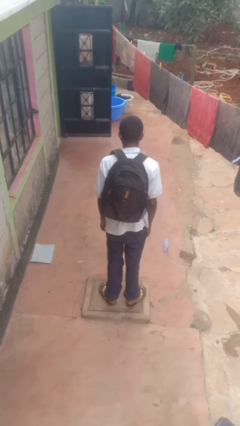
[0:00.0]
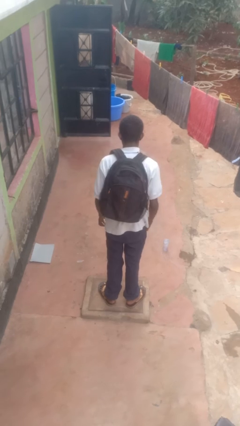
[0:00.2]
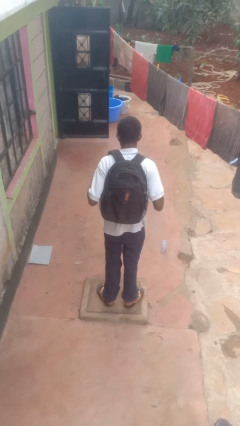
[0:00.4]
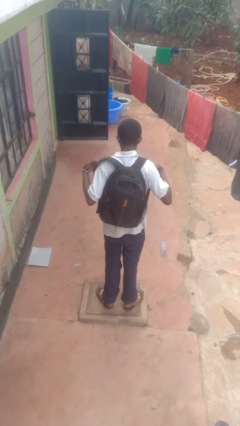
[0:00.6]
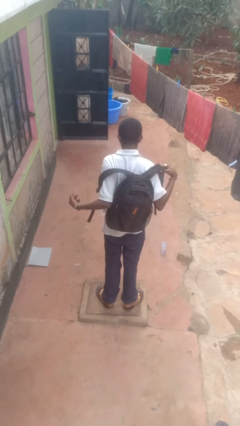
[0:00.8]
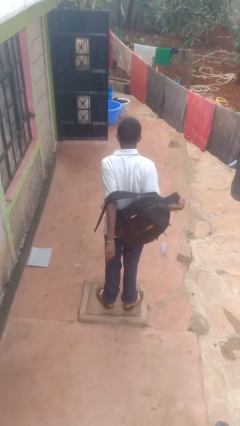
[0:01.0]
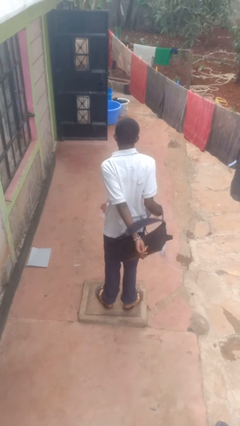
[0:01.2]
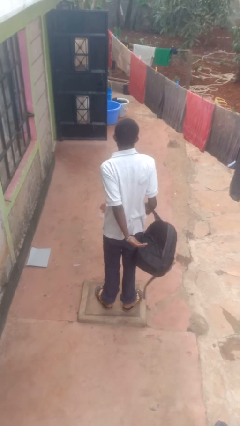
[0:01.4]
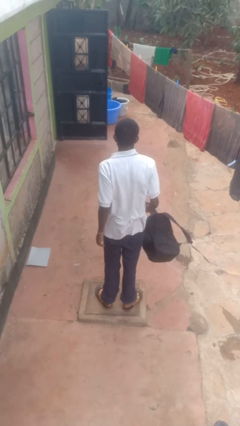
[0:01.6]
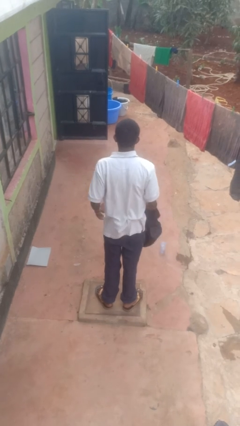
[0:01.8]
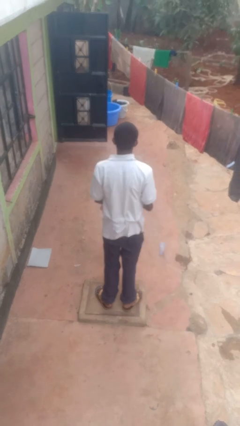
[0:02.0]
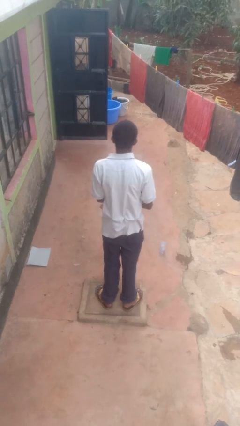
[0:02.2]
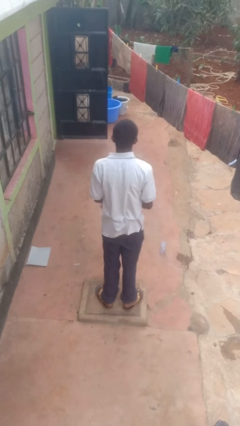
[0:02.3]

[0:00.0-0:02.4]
person takes off backpack

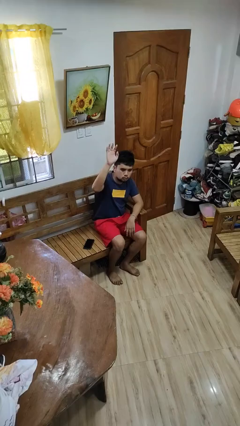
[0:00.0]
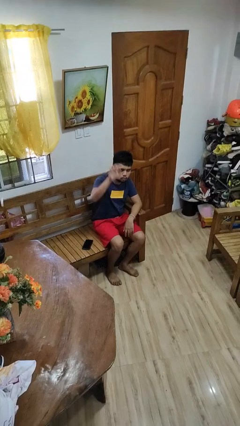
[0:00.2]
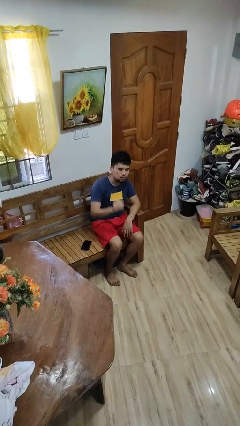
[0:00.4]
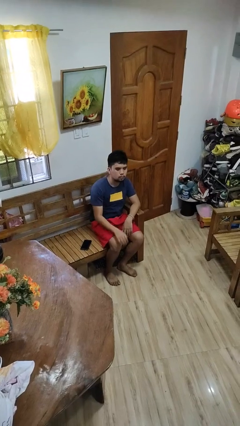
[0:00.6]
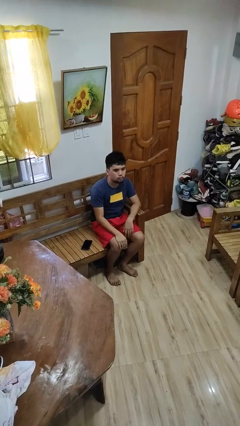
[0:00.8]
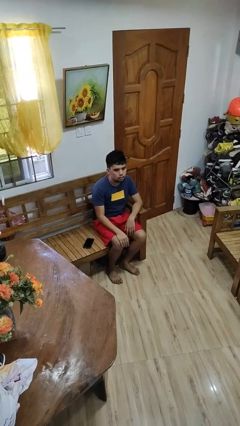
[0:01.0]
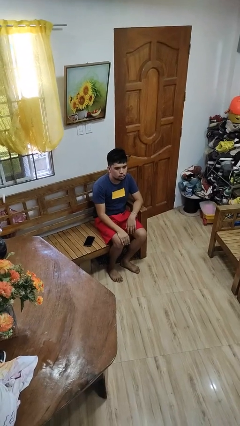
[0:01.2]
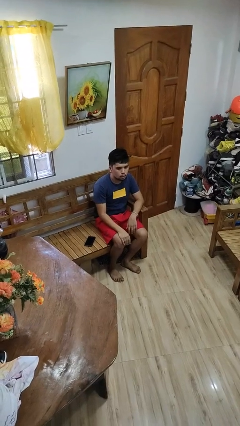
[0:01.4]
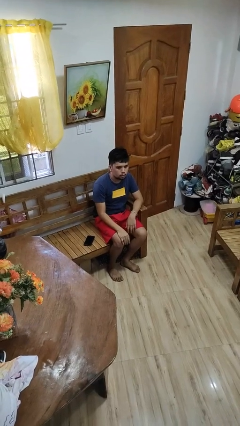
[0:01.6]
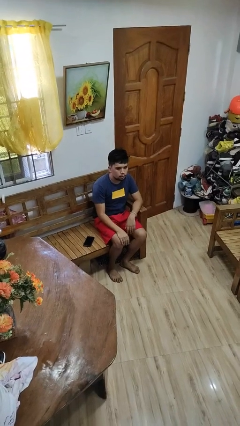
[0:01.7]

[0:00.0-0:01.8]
person gestures lower hand

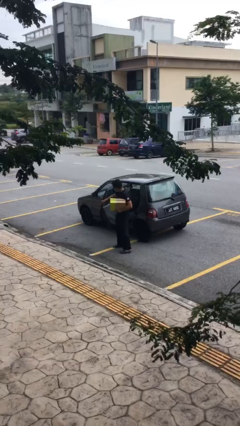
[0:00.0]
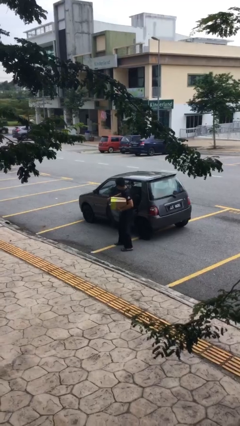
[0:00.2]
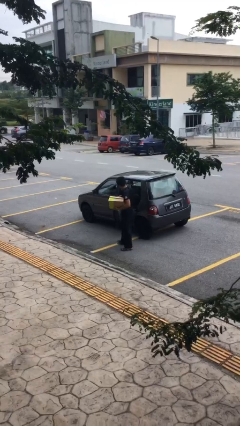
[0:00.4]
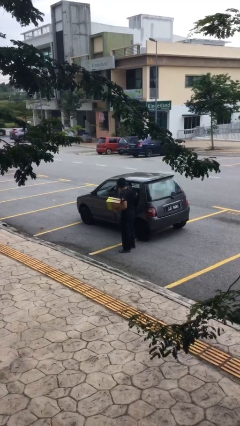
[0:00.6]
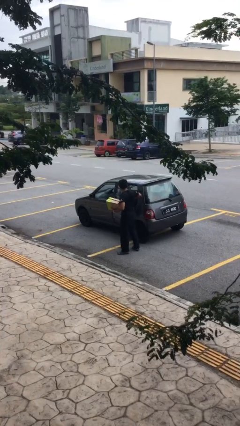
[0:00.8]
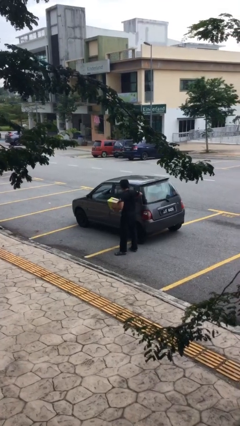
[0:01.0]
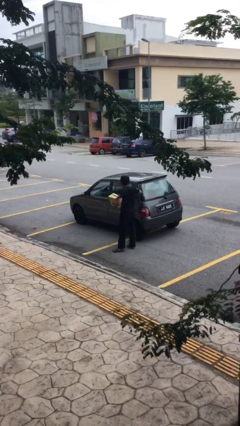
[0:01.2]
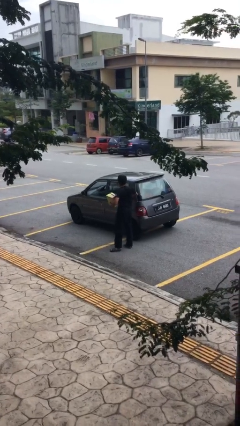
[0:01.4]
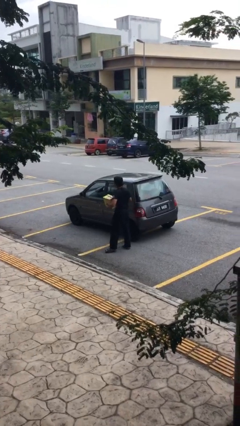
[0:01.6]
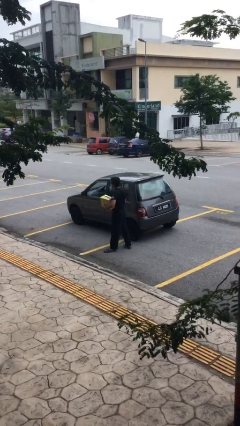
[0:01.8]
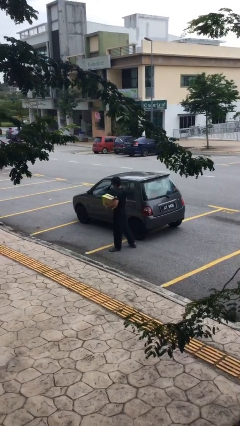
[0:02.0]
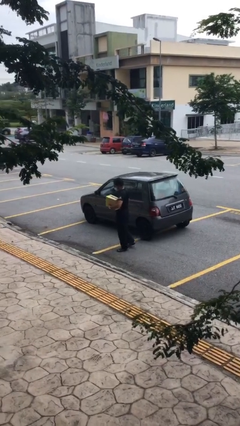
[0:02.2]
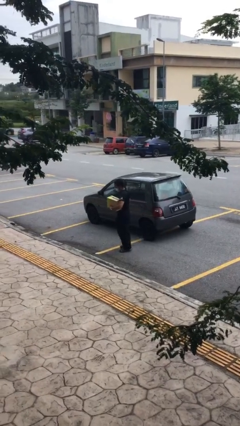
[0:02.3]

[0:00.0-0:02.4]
person closes car door

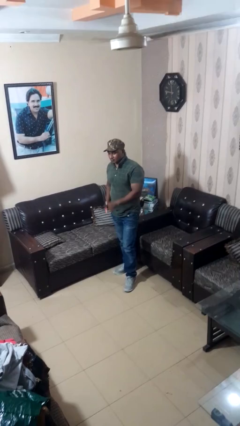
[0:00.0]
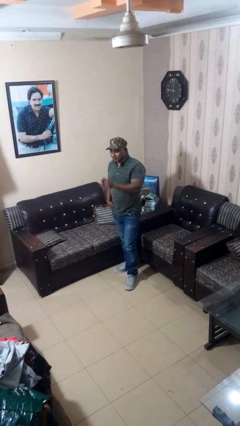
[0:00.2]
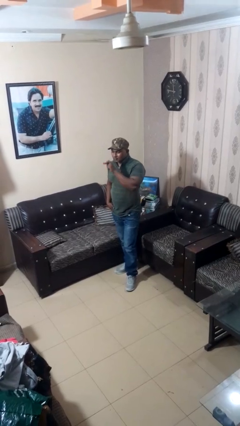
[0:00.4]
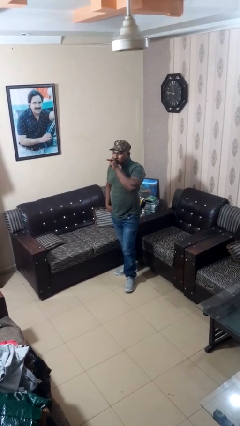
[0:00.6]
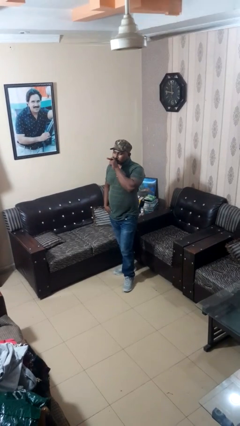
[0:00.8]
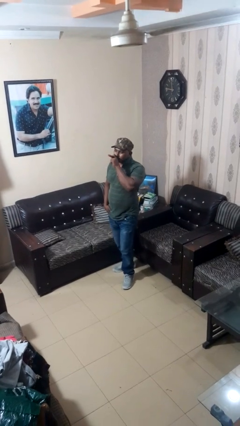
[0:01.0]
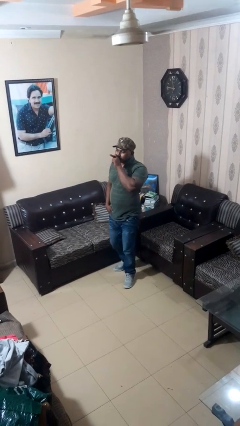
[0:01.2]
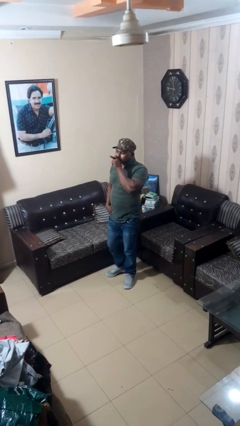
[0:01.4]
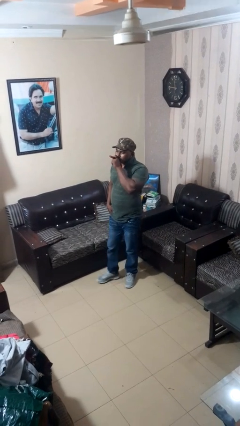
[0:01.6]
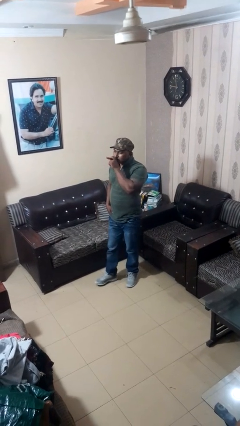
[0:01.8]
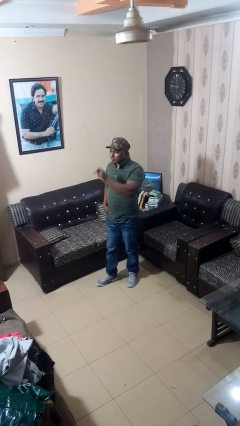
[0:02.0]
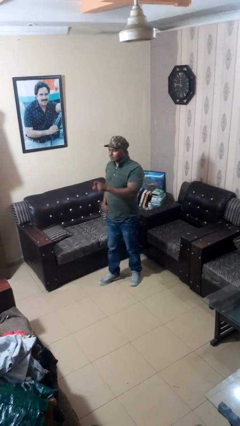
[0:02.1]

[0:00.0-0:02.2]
person vapes

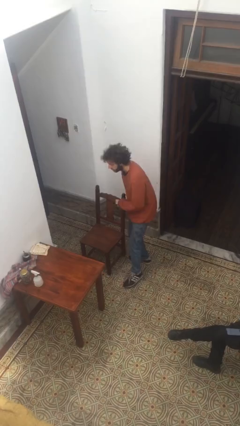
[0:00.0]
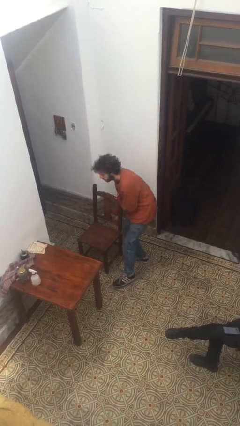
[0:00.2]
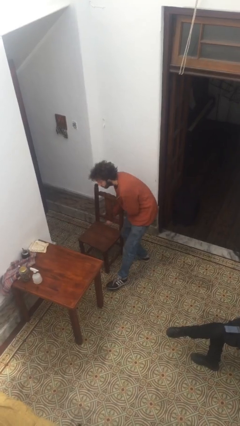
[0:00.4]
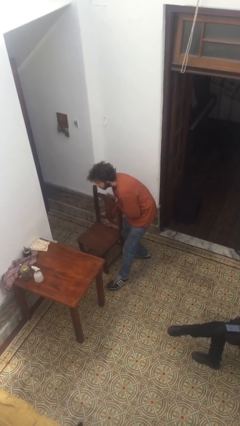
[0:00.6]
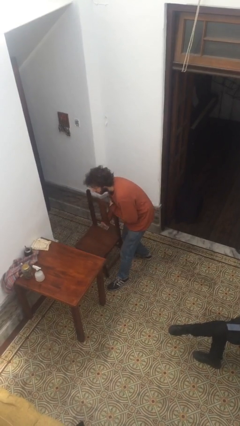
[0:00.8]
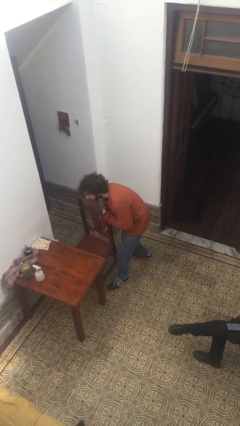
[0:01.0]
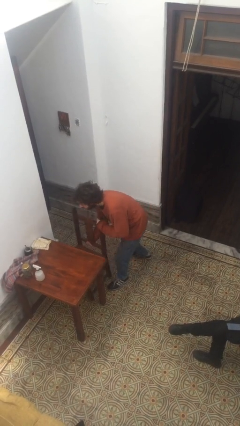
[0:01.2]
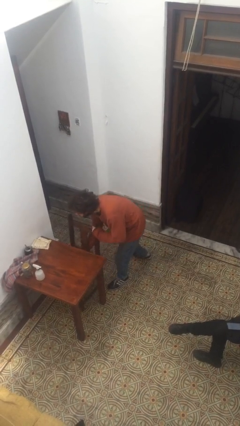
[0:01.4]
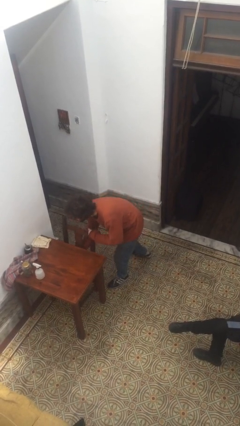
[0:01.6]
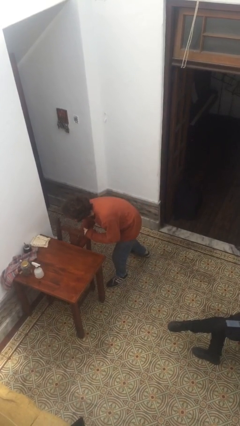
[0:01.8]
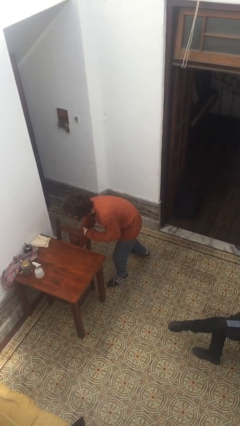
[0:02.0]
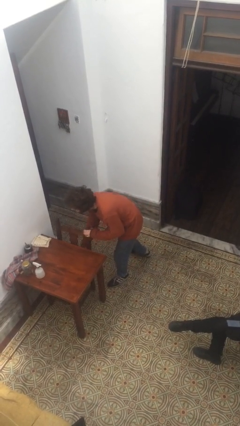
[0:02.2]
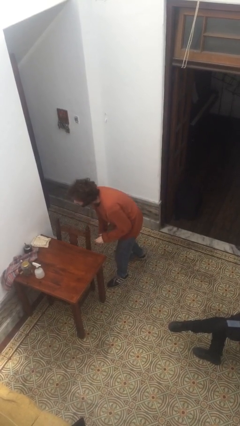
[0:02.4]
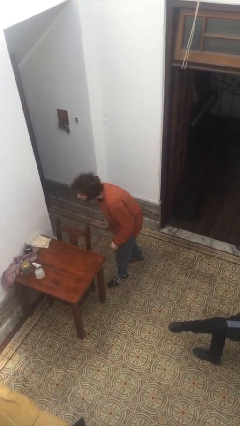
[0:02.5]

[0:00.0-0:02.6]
person pushes in chair

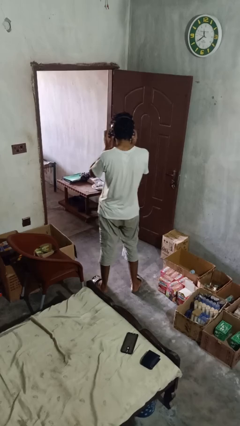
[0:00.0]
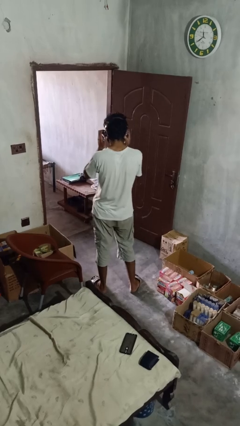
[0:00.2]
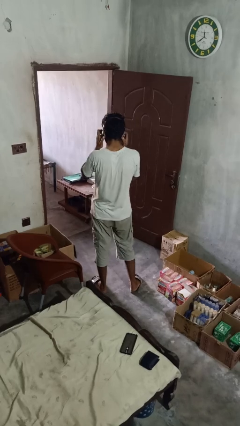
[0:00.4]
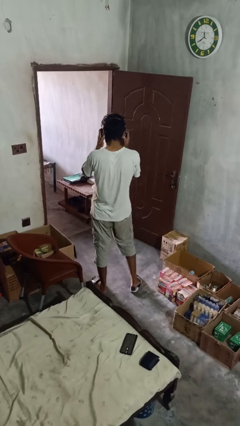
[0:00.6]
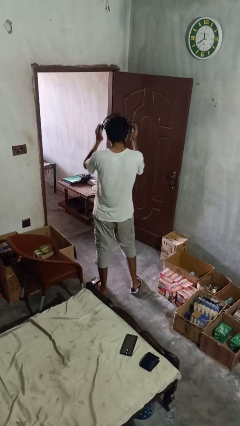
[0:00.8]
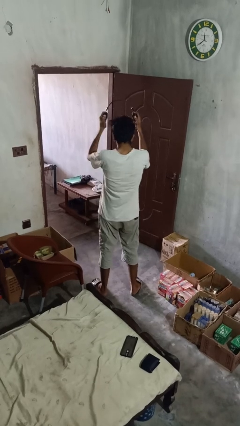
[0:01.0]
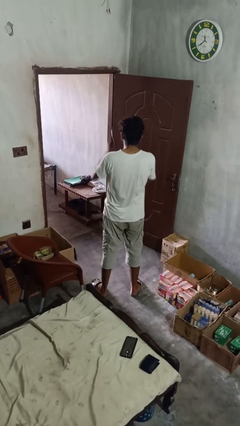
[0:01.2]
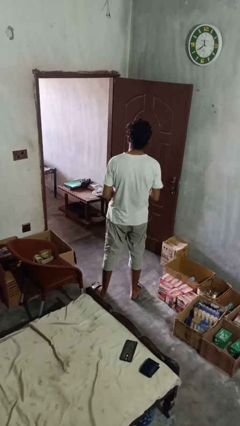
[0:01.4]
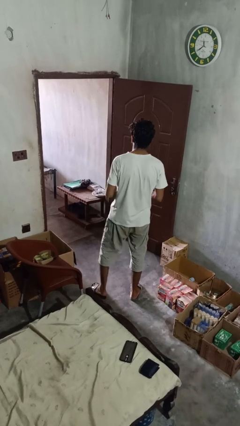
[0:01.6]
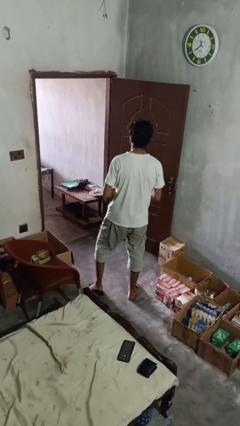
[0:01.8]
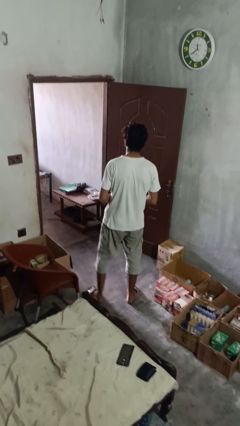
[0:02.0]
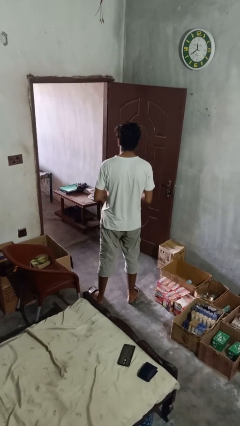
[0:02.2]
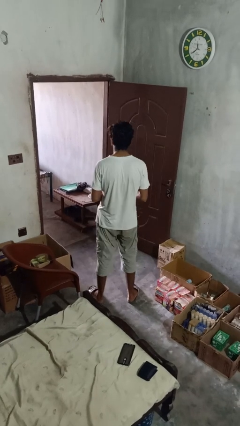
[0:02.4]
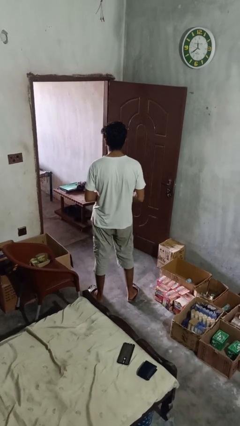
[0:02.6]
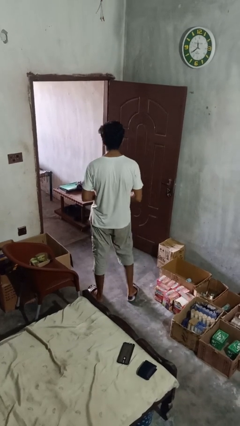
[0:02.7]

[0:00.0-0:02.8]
person takes off headphones

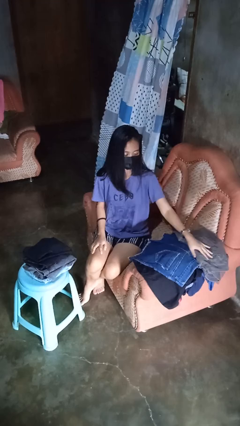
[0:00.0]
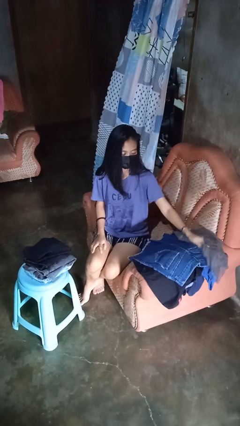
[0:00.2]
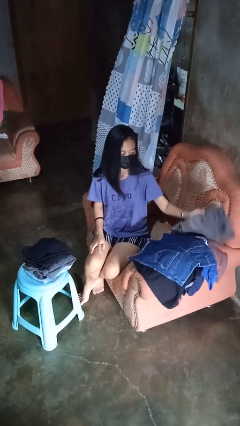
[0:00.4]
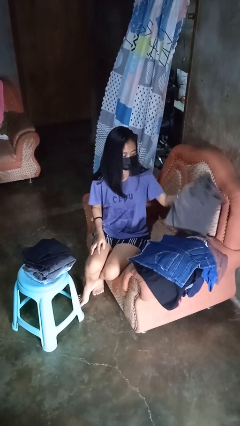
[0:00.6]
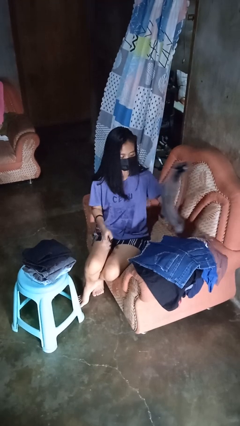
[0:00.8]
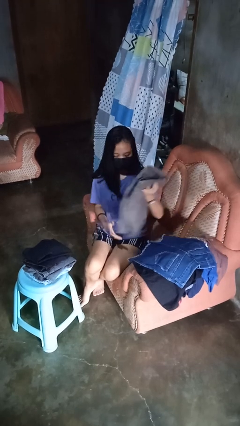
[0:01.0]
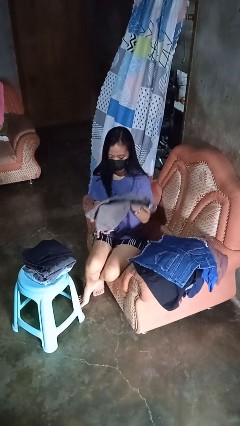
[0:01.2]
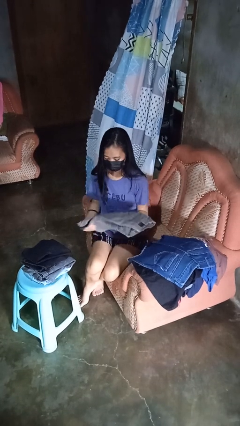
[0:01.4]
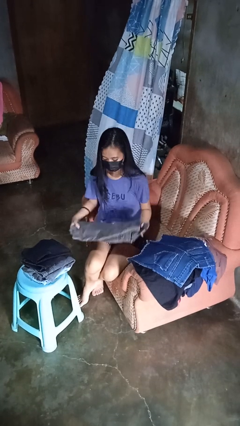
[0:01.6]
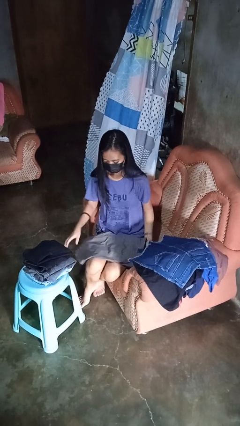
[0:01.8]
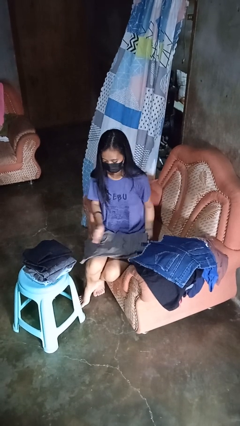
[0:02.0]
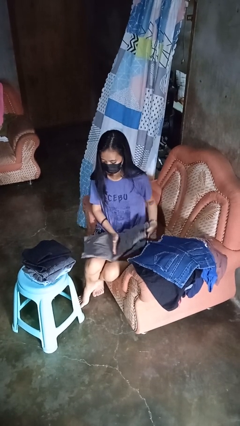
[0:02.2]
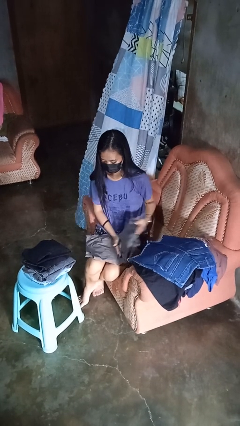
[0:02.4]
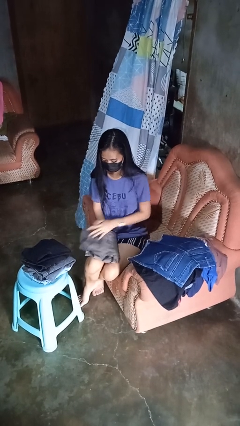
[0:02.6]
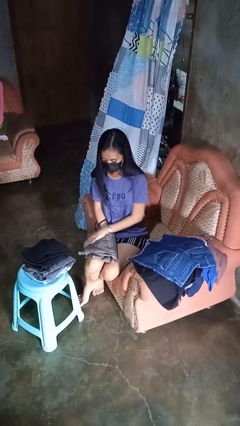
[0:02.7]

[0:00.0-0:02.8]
person folds pants

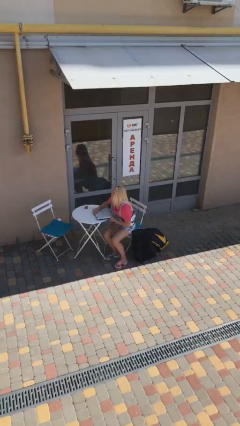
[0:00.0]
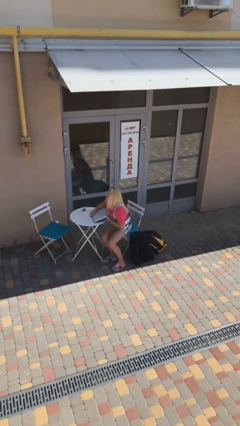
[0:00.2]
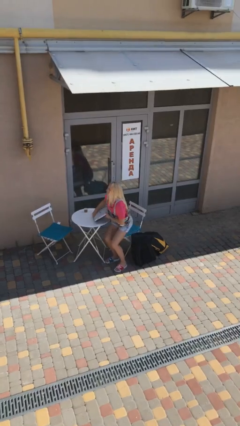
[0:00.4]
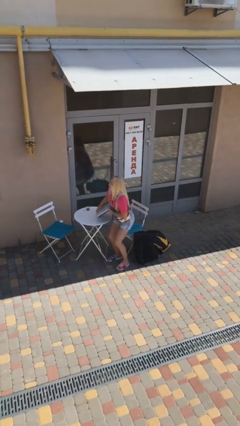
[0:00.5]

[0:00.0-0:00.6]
person stands up
